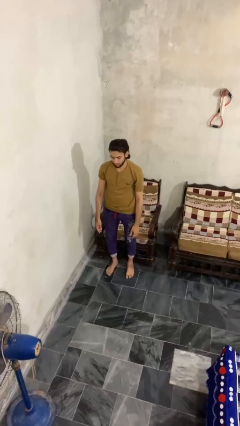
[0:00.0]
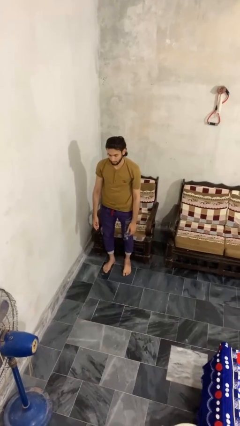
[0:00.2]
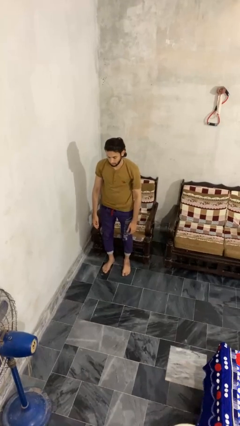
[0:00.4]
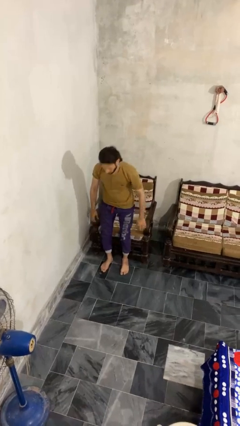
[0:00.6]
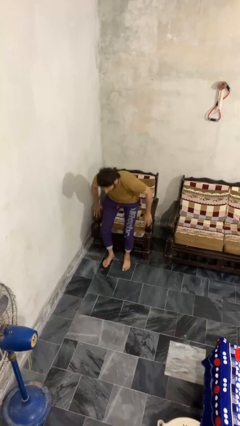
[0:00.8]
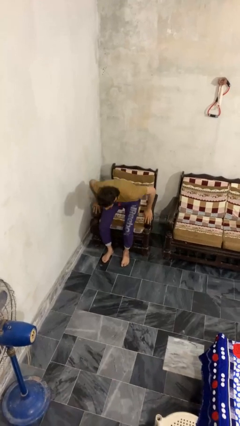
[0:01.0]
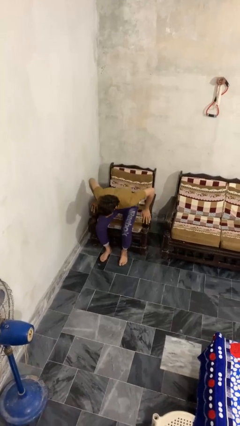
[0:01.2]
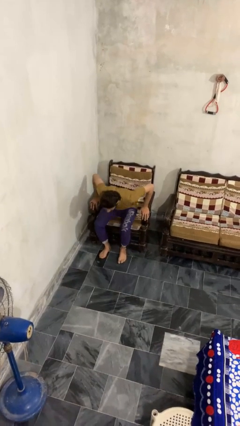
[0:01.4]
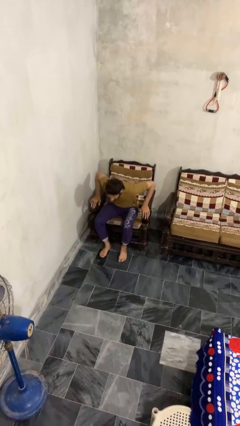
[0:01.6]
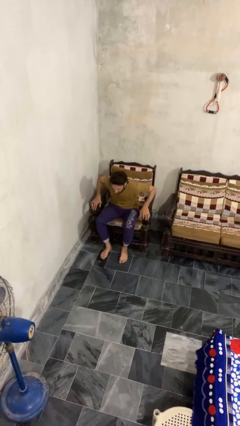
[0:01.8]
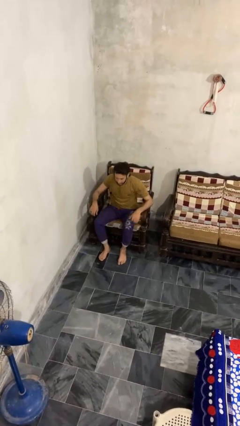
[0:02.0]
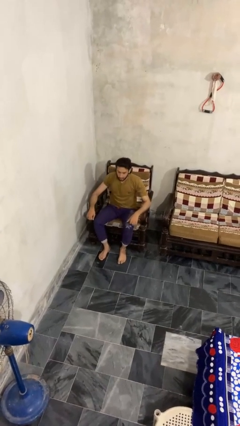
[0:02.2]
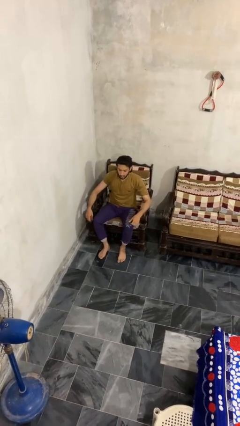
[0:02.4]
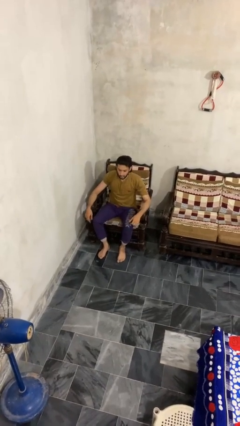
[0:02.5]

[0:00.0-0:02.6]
person sits down

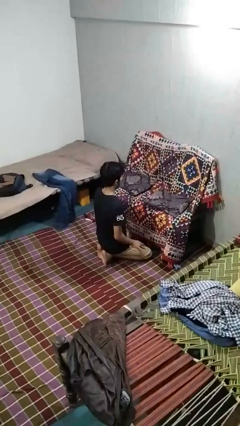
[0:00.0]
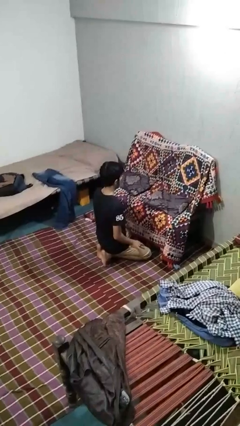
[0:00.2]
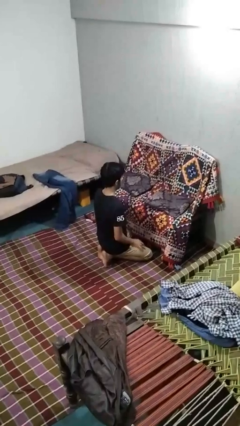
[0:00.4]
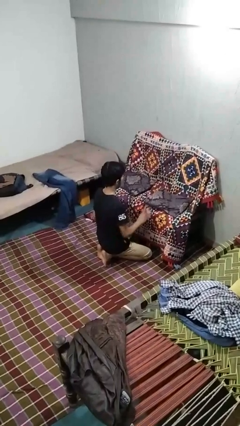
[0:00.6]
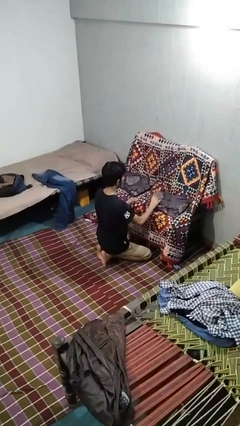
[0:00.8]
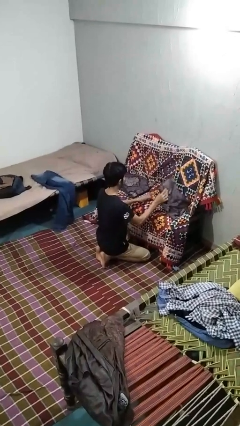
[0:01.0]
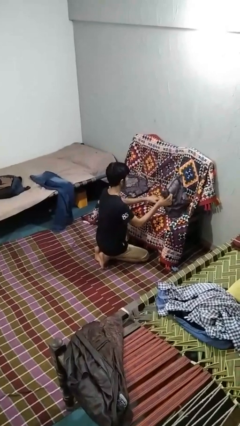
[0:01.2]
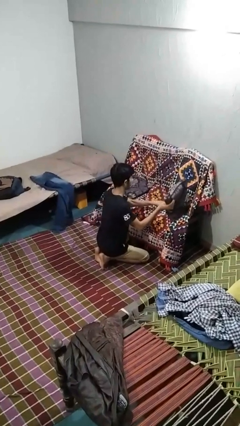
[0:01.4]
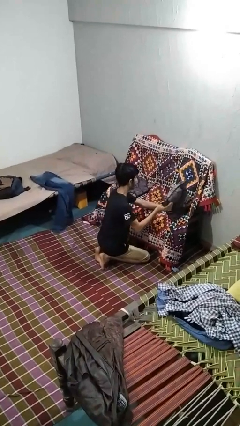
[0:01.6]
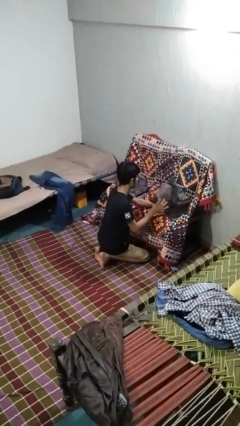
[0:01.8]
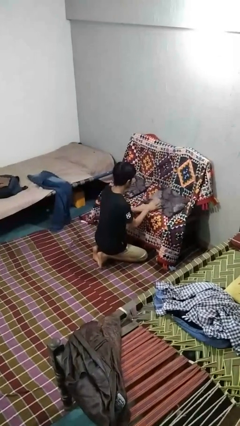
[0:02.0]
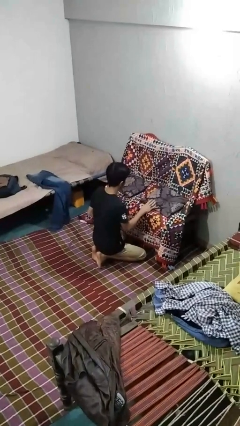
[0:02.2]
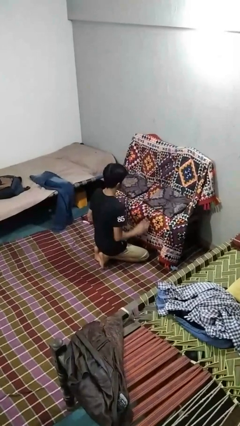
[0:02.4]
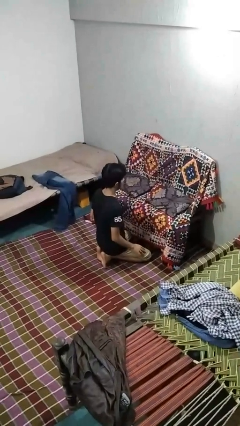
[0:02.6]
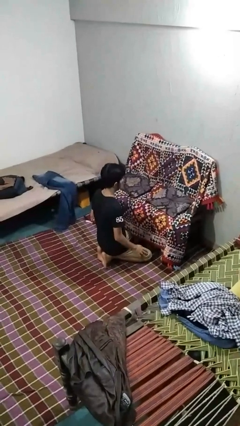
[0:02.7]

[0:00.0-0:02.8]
person searches in couch

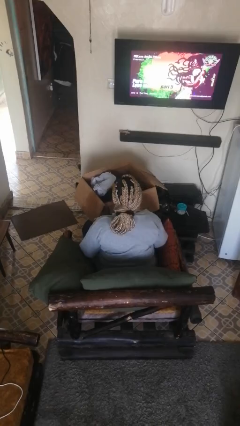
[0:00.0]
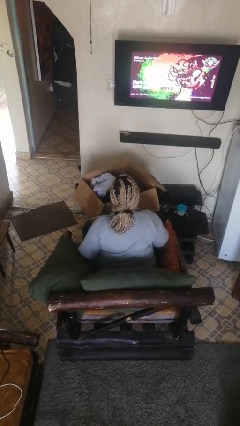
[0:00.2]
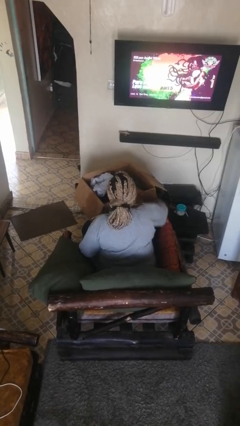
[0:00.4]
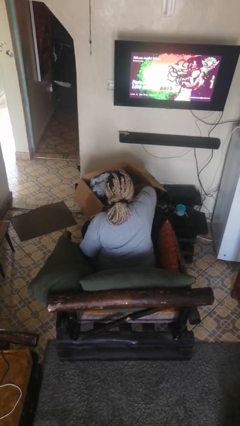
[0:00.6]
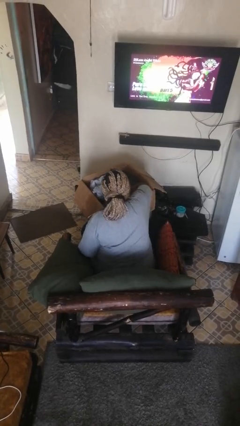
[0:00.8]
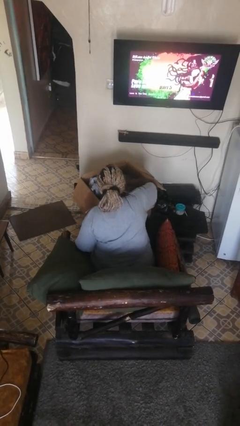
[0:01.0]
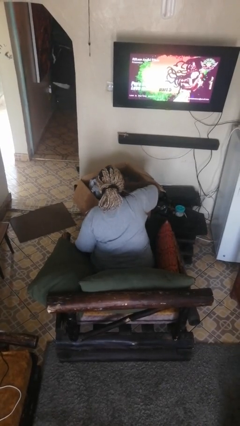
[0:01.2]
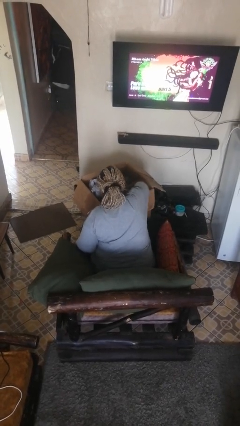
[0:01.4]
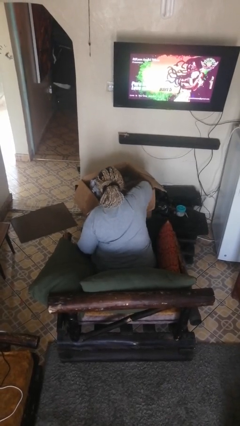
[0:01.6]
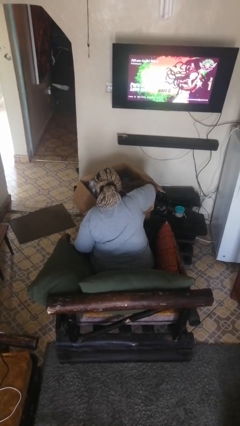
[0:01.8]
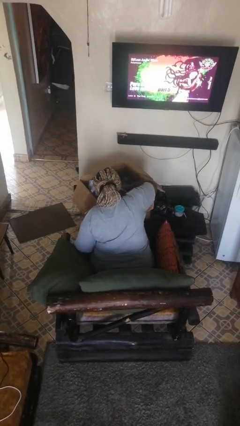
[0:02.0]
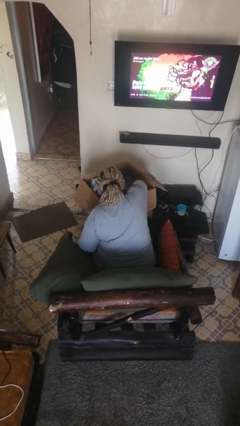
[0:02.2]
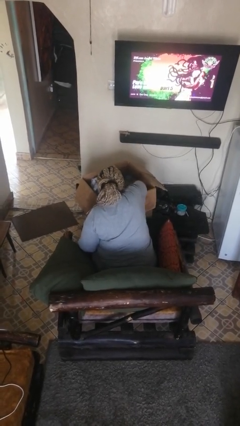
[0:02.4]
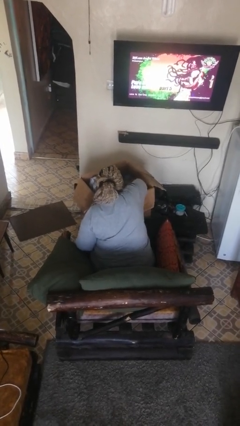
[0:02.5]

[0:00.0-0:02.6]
person searches in box

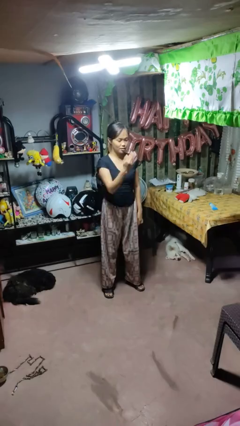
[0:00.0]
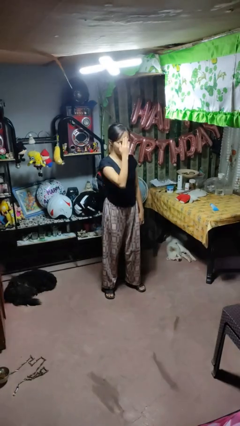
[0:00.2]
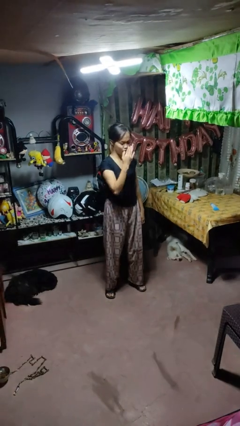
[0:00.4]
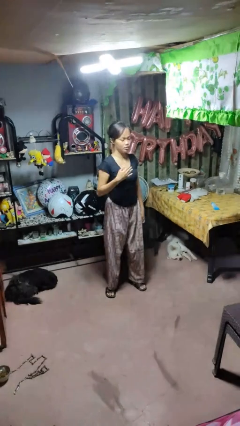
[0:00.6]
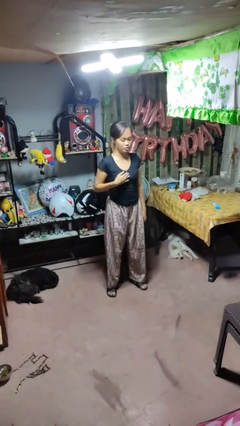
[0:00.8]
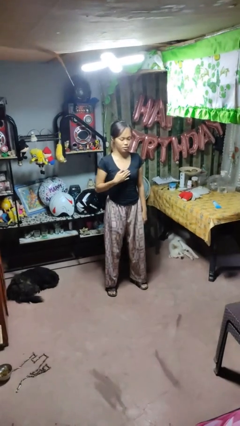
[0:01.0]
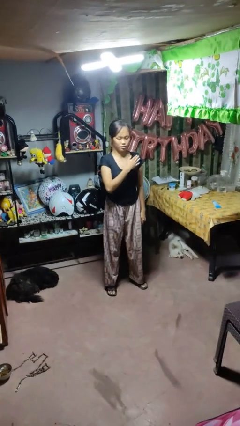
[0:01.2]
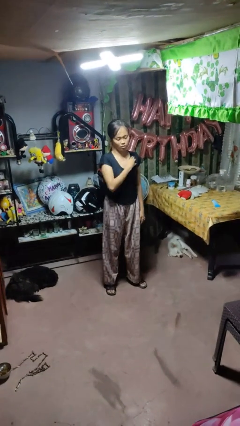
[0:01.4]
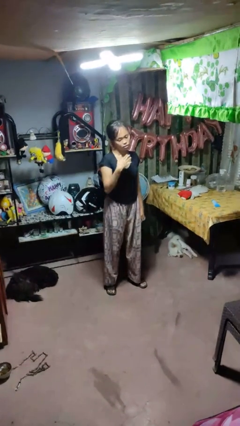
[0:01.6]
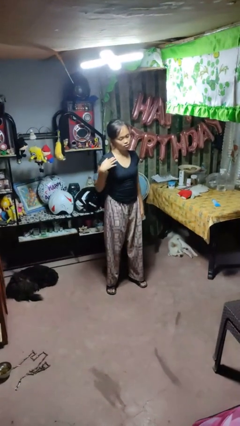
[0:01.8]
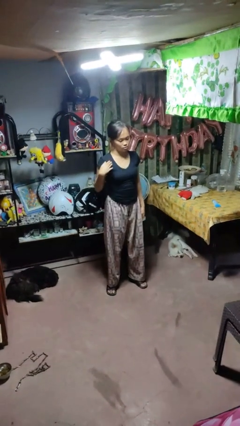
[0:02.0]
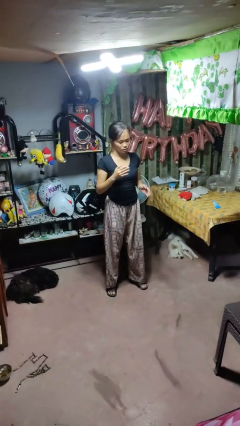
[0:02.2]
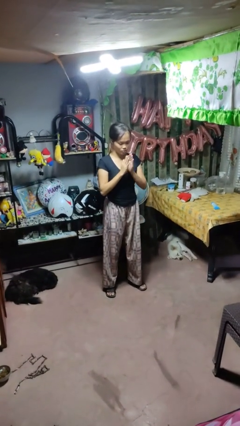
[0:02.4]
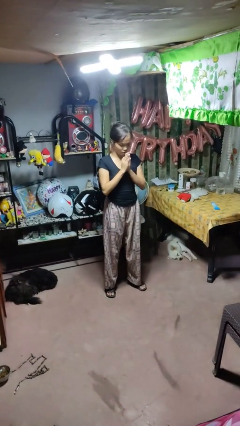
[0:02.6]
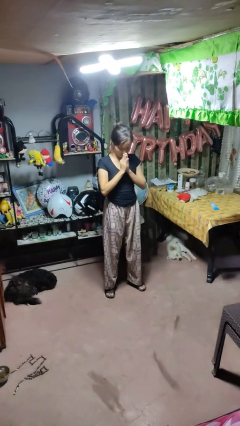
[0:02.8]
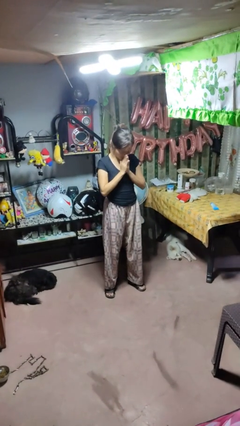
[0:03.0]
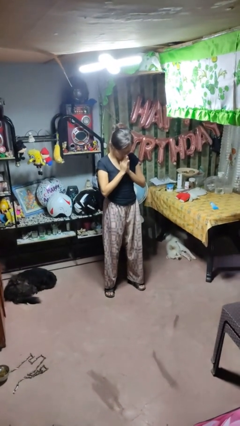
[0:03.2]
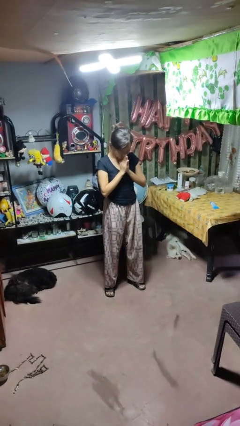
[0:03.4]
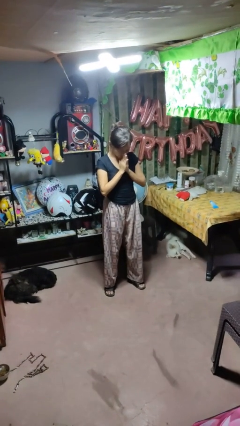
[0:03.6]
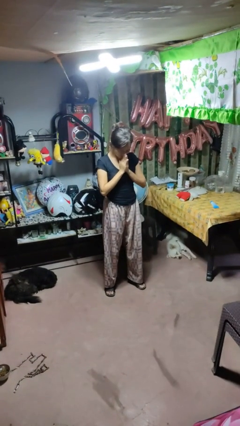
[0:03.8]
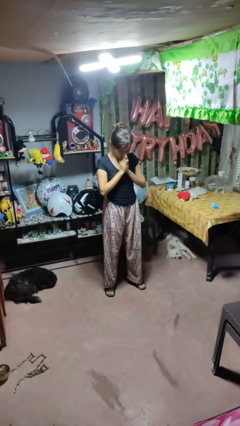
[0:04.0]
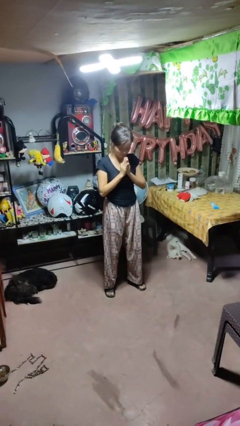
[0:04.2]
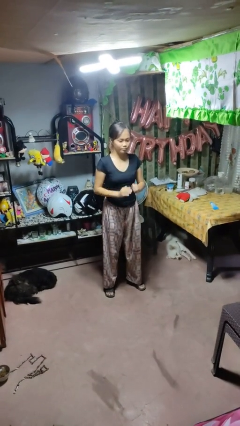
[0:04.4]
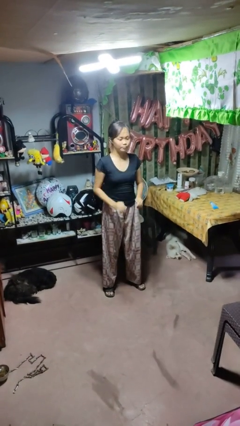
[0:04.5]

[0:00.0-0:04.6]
person prays

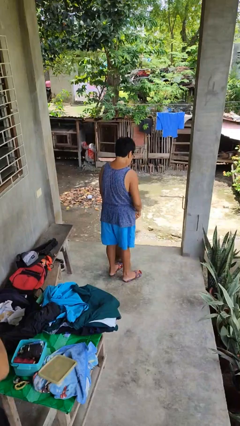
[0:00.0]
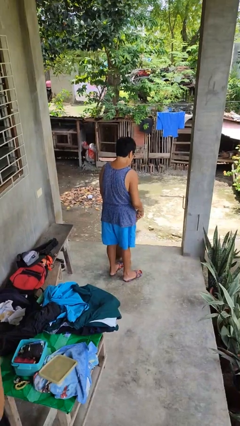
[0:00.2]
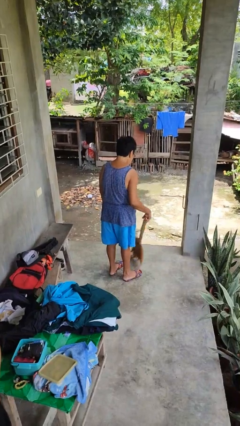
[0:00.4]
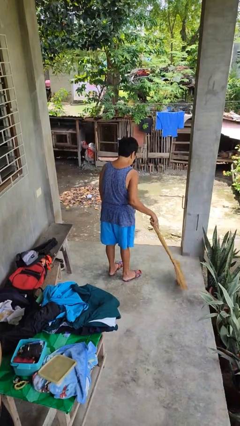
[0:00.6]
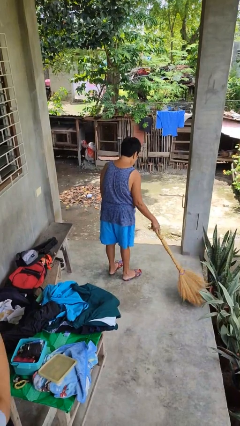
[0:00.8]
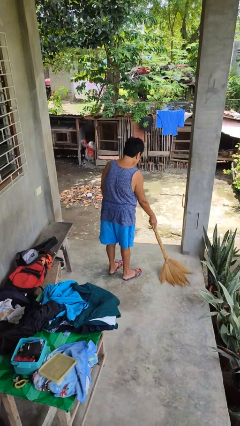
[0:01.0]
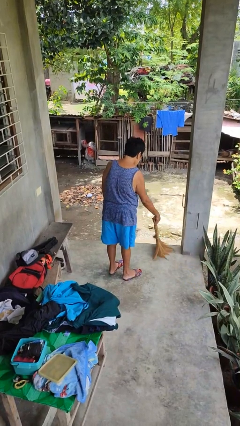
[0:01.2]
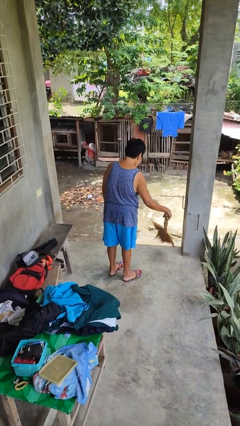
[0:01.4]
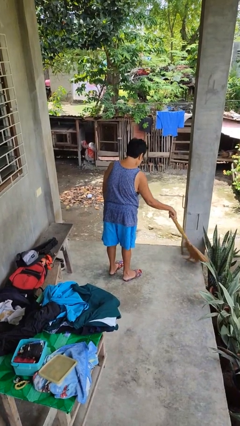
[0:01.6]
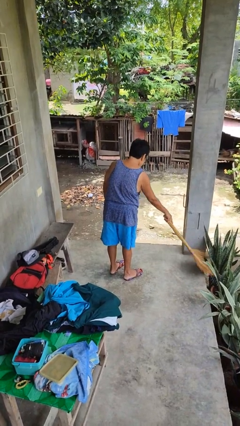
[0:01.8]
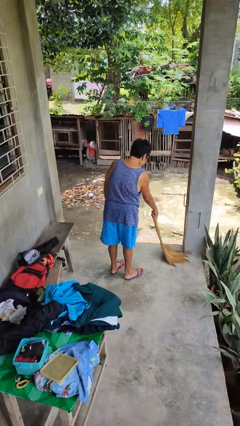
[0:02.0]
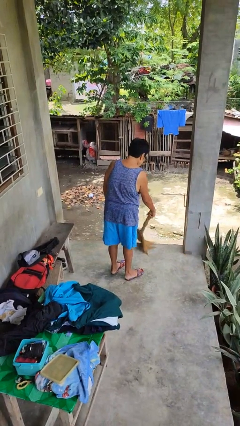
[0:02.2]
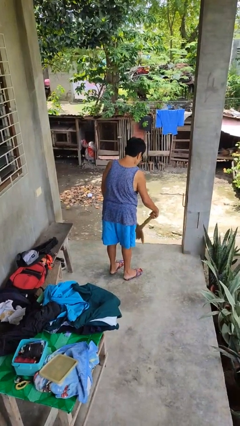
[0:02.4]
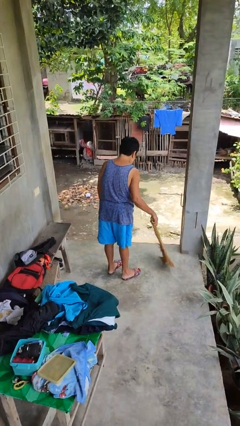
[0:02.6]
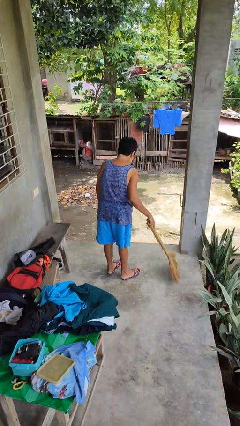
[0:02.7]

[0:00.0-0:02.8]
person sweeps floor

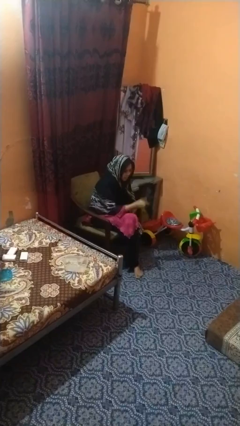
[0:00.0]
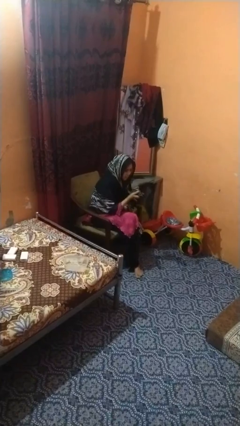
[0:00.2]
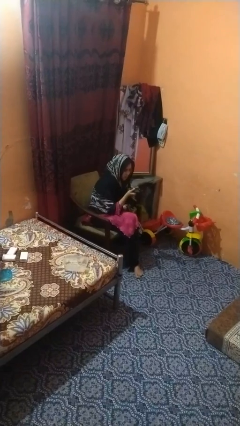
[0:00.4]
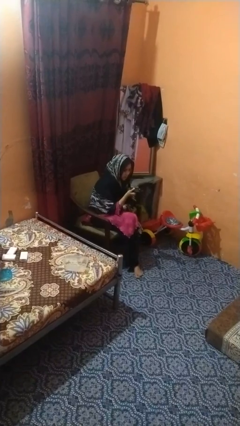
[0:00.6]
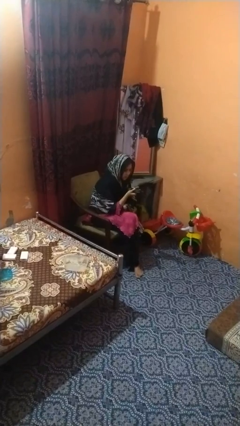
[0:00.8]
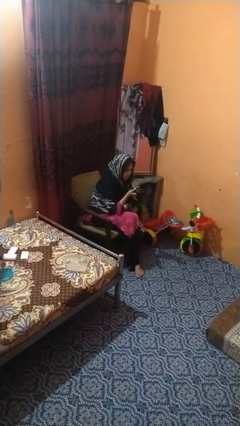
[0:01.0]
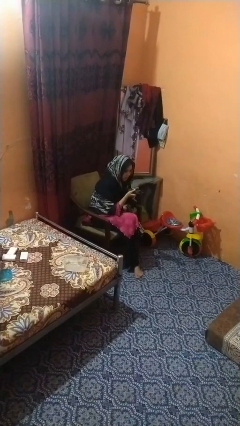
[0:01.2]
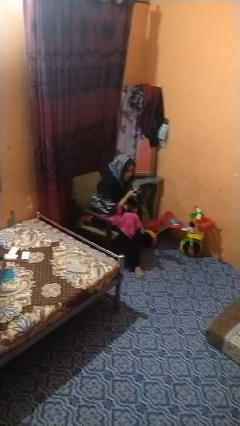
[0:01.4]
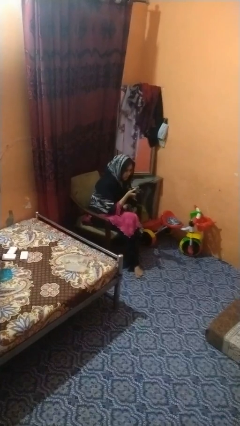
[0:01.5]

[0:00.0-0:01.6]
person uses television remote

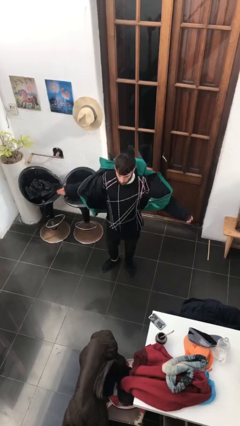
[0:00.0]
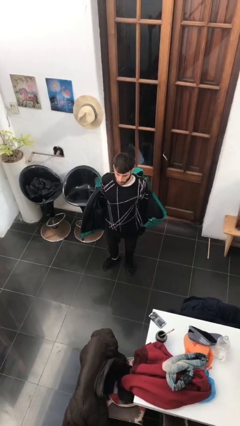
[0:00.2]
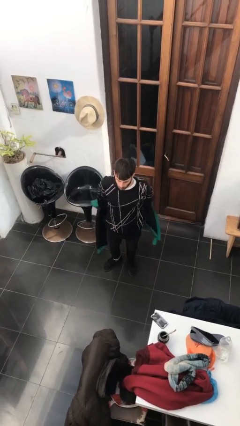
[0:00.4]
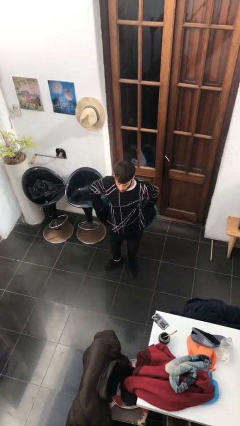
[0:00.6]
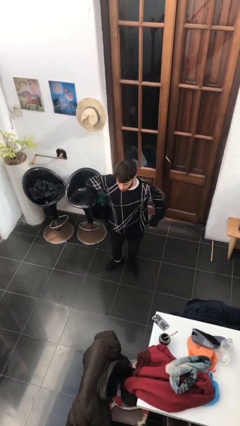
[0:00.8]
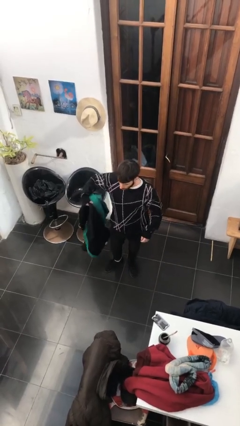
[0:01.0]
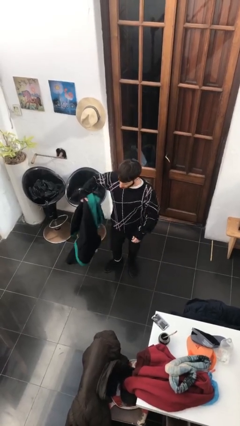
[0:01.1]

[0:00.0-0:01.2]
person takes off jacket
